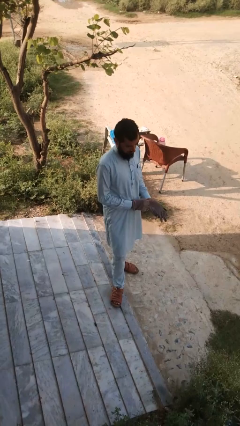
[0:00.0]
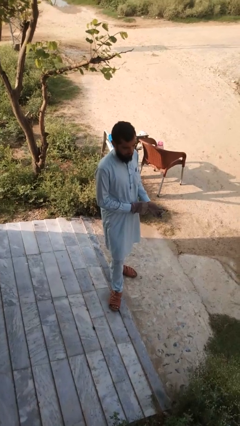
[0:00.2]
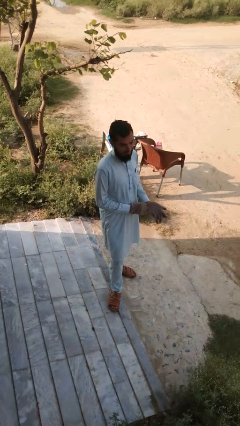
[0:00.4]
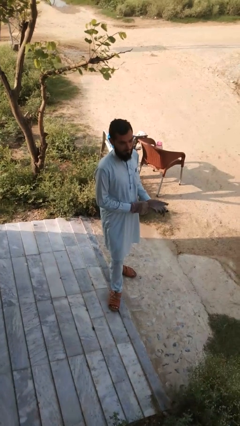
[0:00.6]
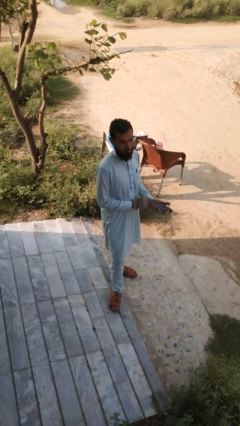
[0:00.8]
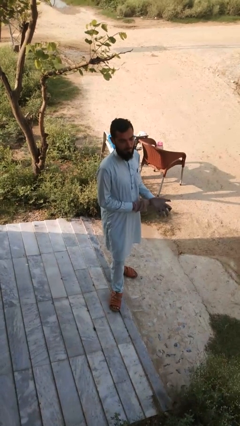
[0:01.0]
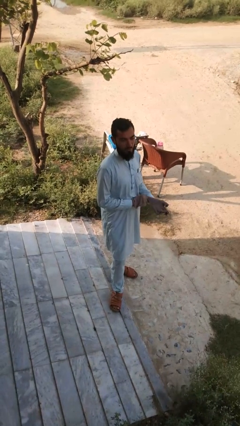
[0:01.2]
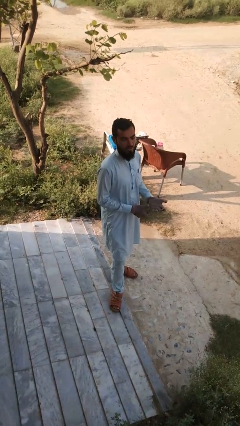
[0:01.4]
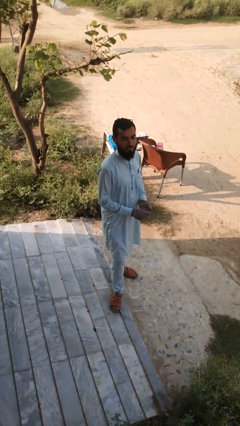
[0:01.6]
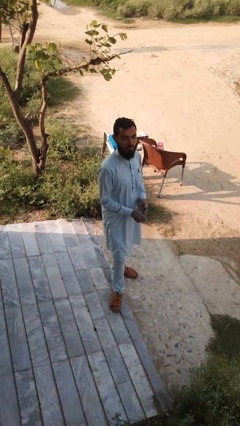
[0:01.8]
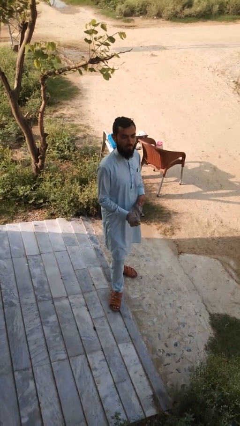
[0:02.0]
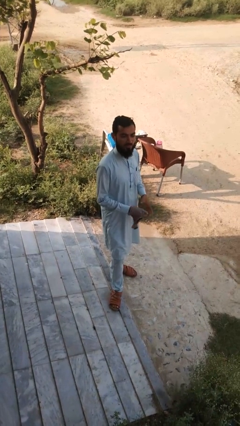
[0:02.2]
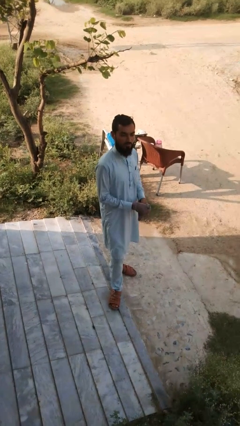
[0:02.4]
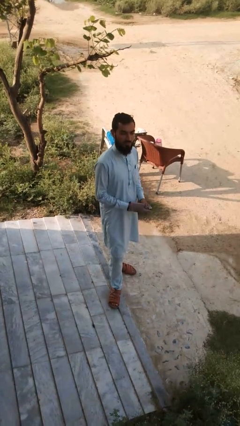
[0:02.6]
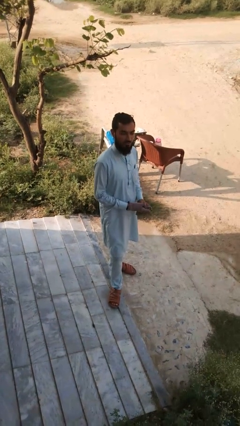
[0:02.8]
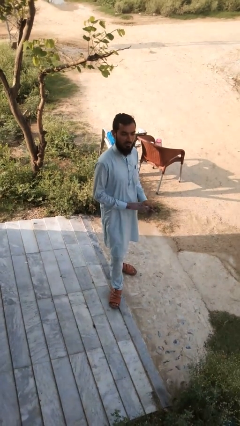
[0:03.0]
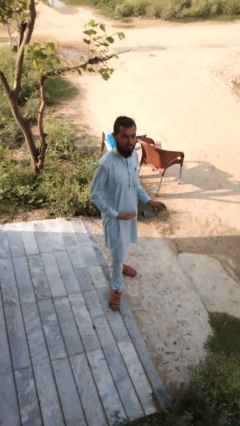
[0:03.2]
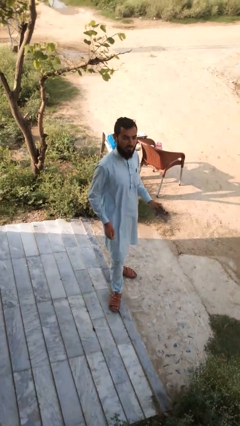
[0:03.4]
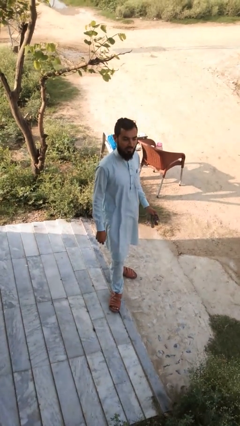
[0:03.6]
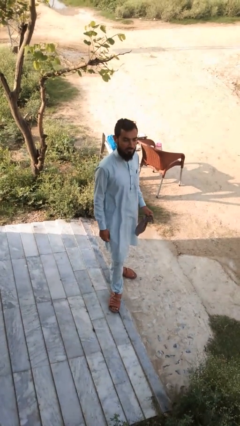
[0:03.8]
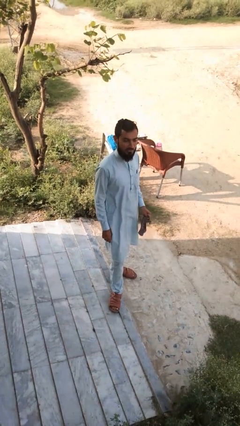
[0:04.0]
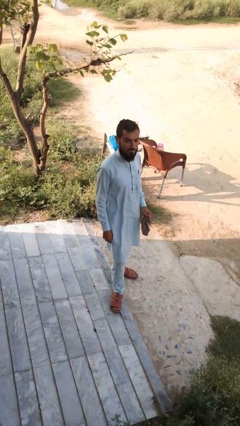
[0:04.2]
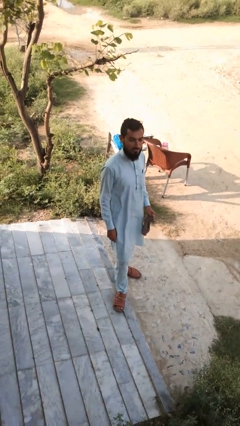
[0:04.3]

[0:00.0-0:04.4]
person takes off gloves

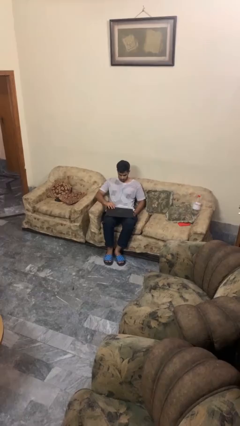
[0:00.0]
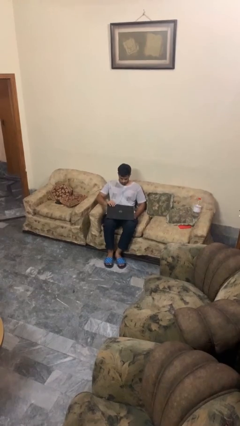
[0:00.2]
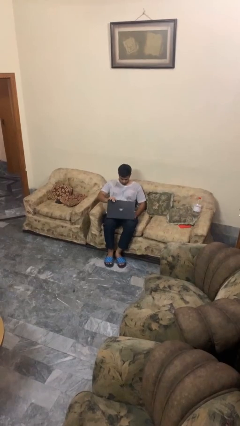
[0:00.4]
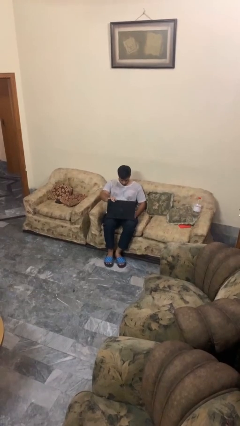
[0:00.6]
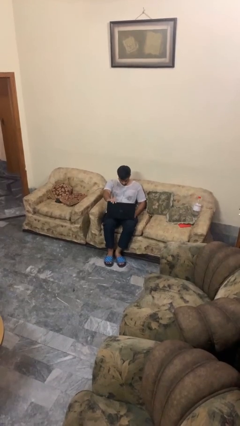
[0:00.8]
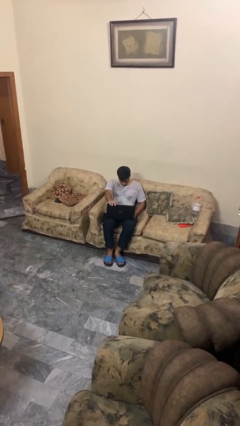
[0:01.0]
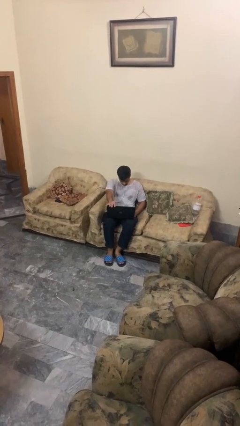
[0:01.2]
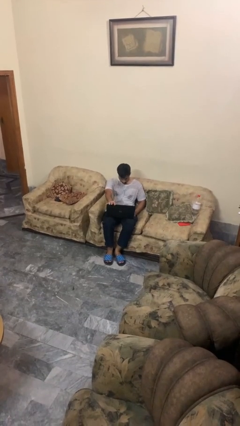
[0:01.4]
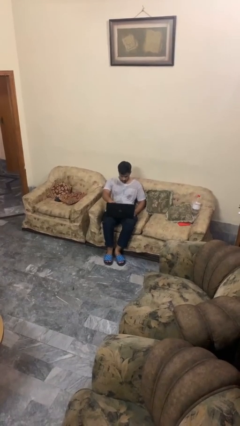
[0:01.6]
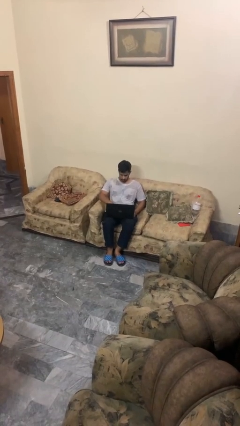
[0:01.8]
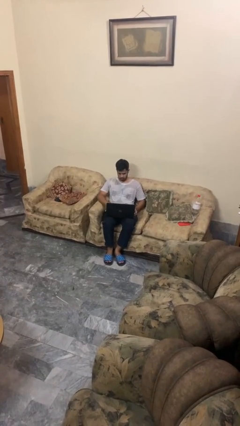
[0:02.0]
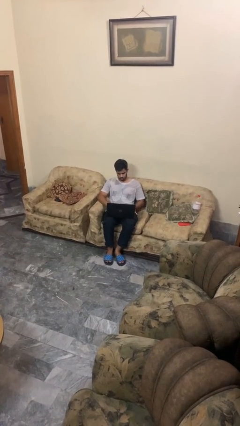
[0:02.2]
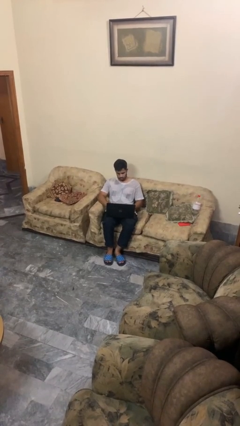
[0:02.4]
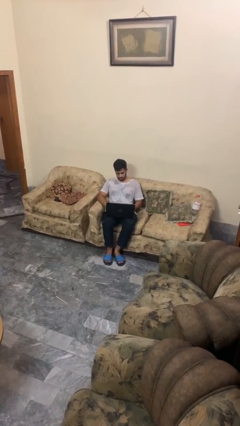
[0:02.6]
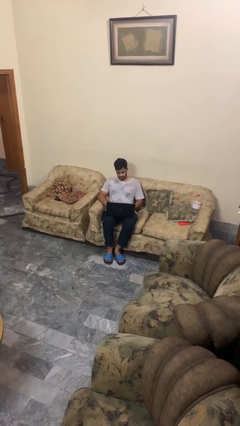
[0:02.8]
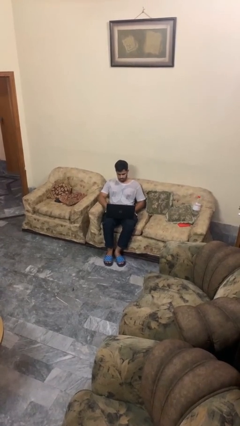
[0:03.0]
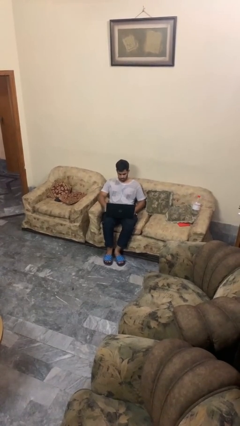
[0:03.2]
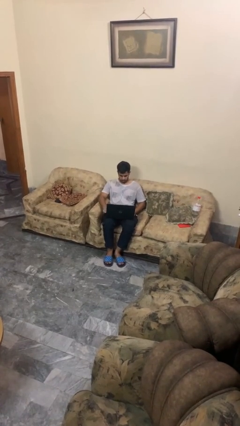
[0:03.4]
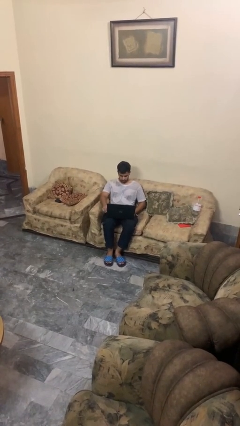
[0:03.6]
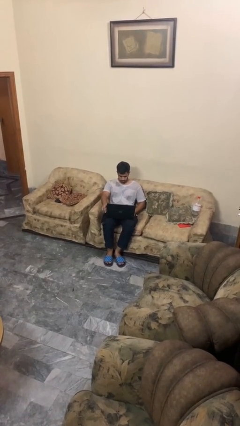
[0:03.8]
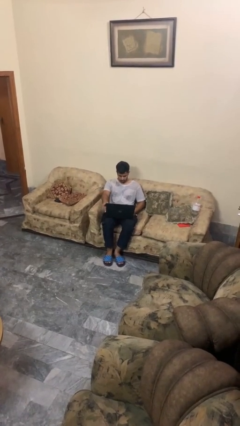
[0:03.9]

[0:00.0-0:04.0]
person opens laptop

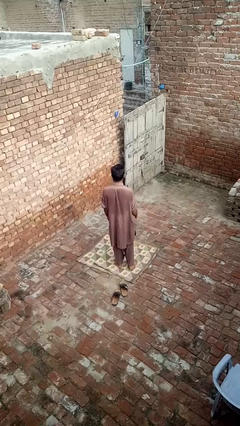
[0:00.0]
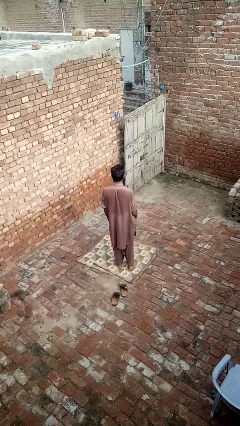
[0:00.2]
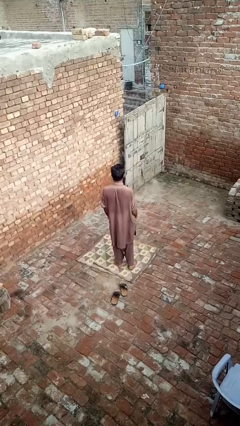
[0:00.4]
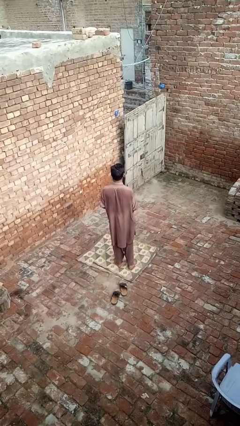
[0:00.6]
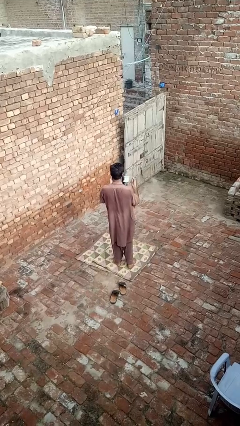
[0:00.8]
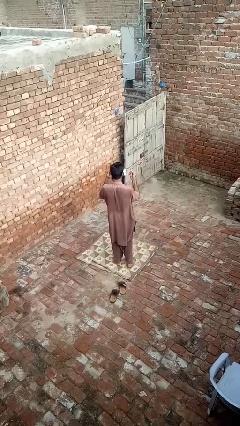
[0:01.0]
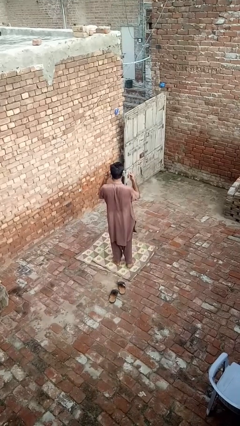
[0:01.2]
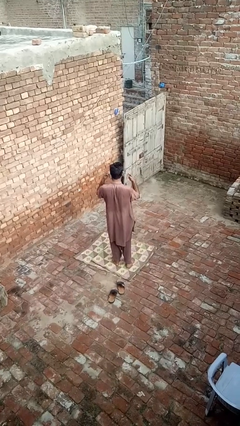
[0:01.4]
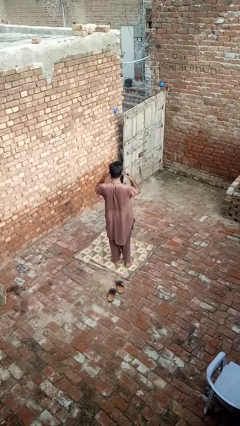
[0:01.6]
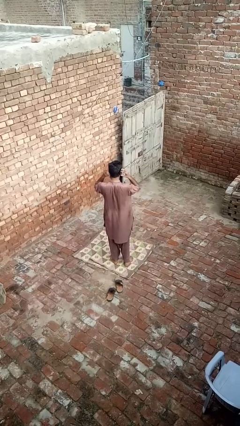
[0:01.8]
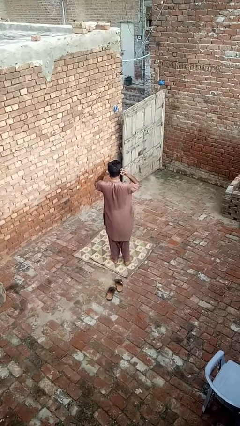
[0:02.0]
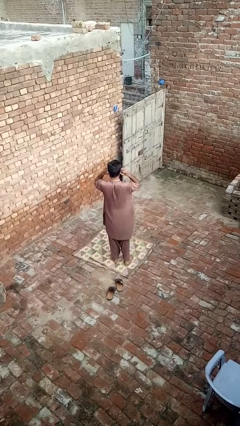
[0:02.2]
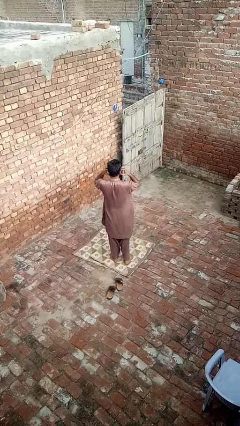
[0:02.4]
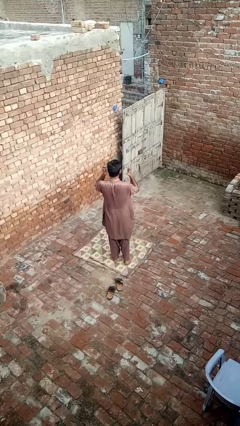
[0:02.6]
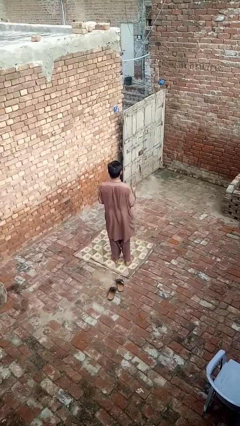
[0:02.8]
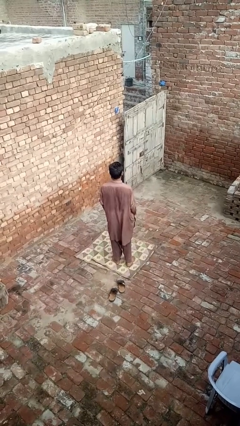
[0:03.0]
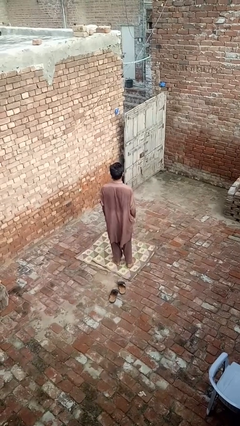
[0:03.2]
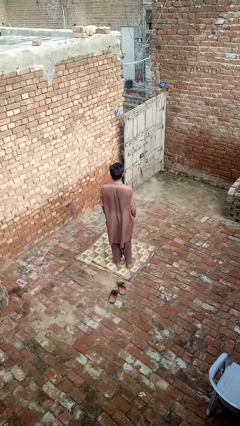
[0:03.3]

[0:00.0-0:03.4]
person puts on facemask

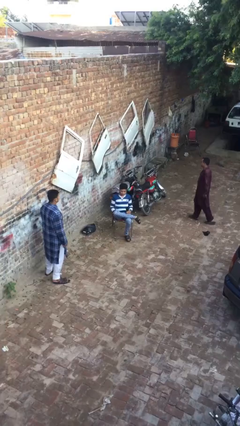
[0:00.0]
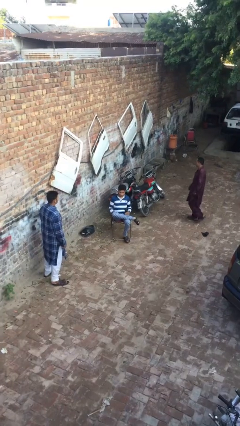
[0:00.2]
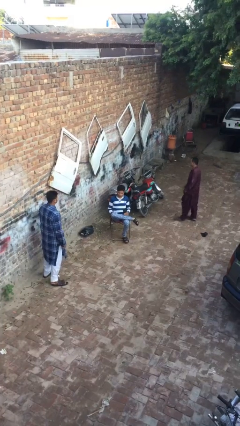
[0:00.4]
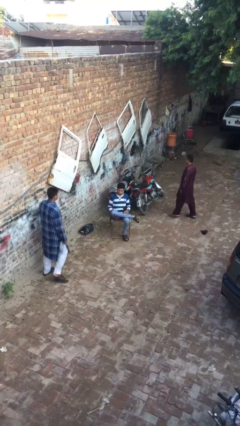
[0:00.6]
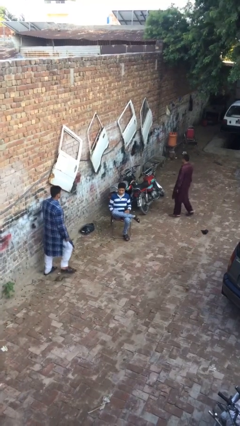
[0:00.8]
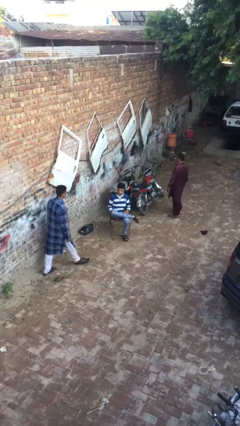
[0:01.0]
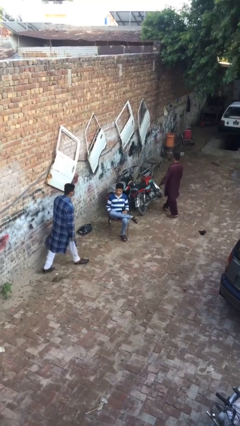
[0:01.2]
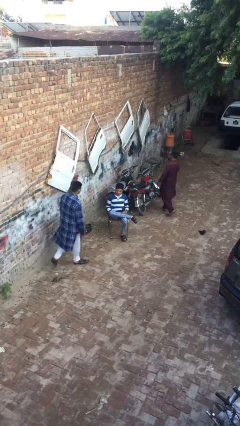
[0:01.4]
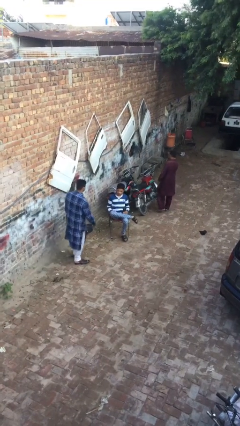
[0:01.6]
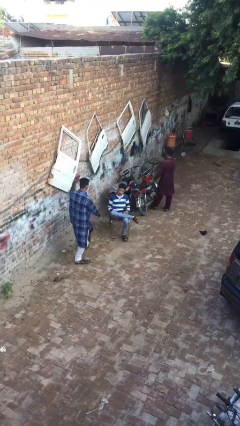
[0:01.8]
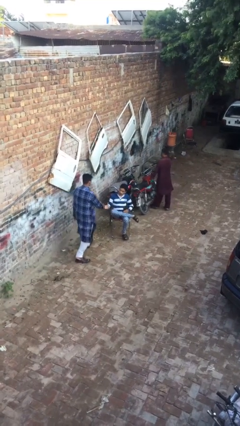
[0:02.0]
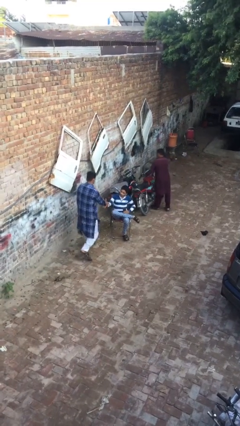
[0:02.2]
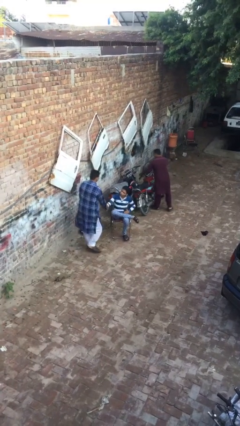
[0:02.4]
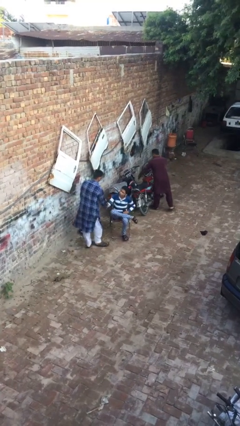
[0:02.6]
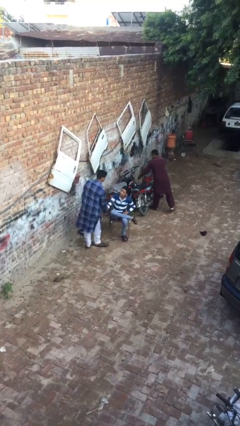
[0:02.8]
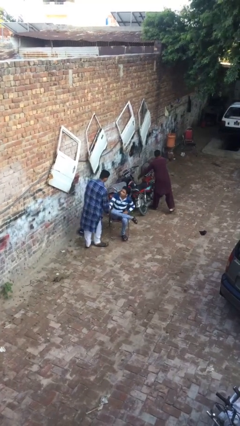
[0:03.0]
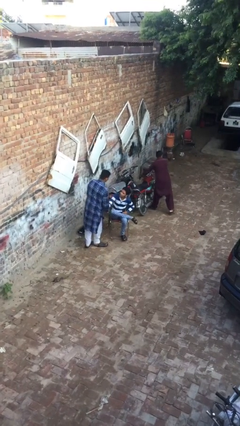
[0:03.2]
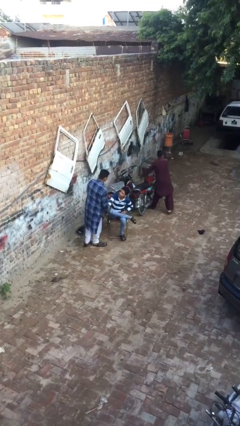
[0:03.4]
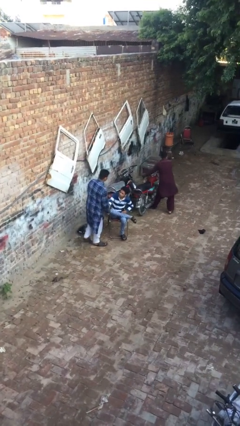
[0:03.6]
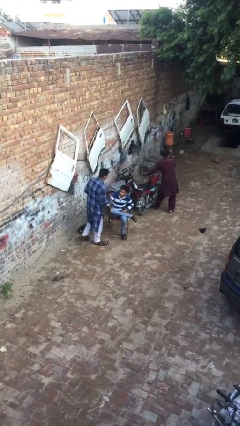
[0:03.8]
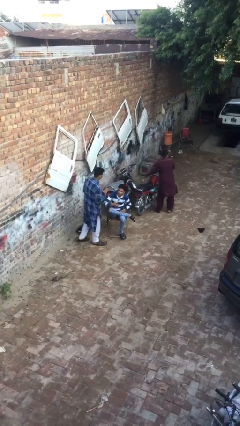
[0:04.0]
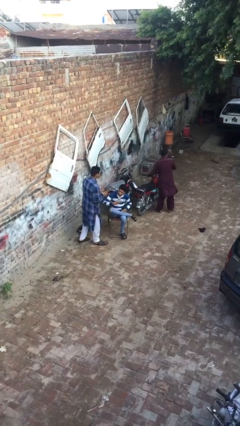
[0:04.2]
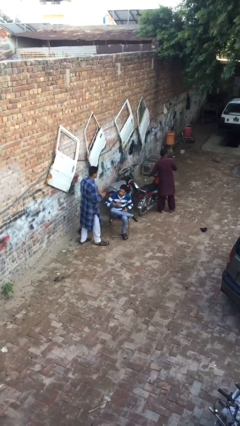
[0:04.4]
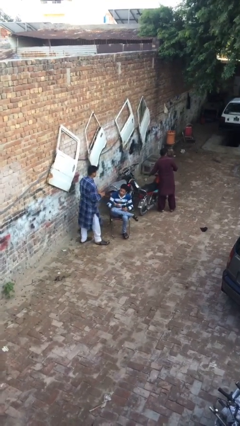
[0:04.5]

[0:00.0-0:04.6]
person shakes hand

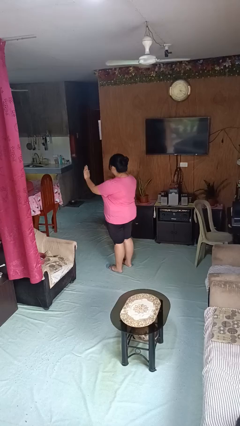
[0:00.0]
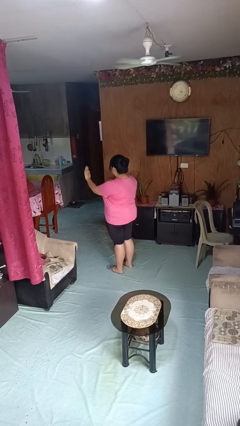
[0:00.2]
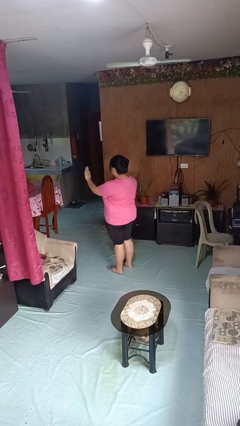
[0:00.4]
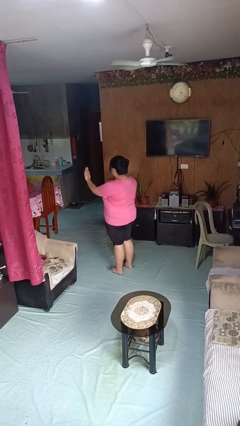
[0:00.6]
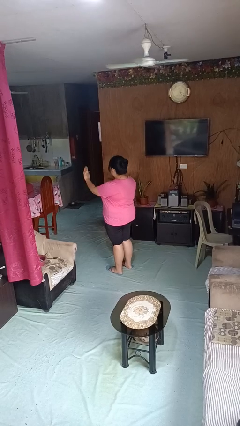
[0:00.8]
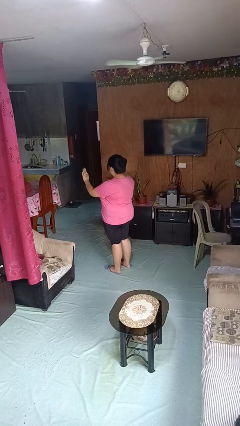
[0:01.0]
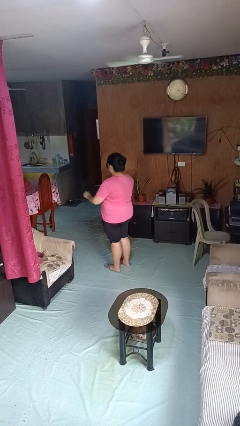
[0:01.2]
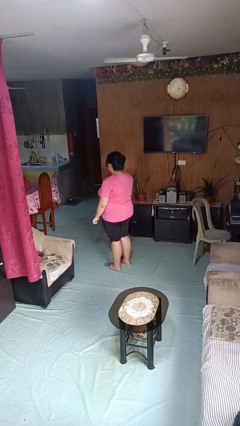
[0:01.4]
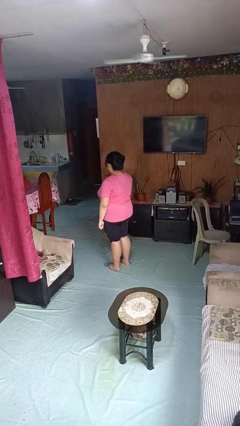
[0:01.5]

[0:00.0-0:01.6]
person gestures stop
